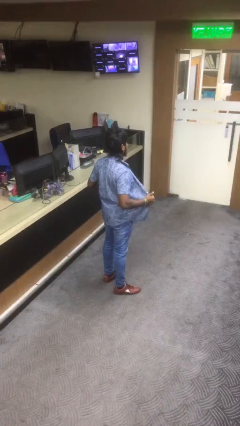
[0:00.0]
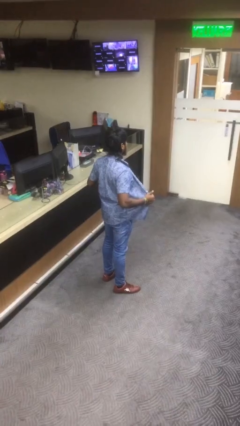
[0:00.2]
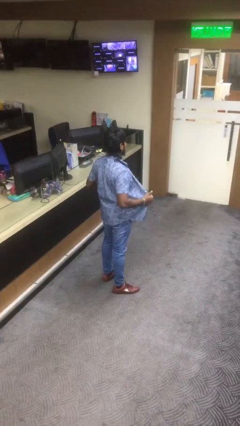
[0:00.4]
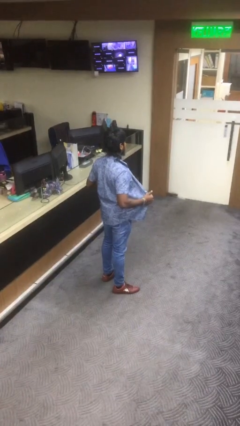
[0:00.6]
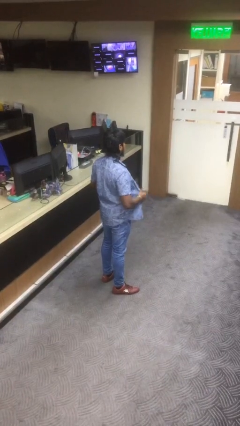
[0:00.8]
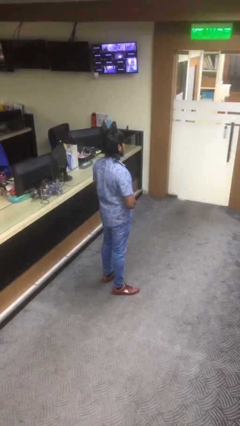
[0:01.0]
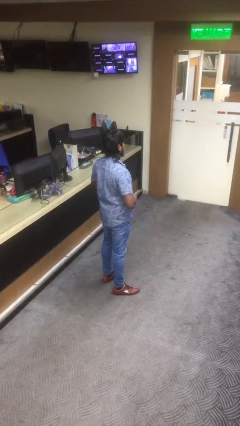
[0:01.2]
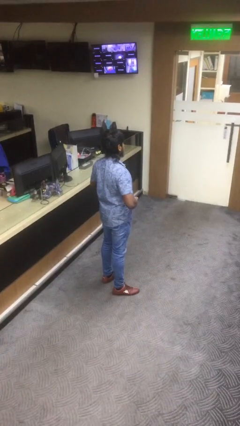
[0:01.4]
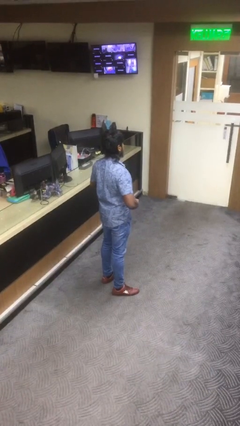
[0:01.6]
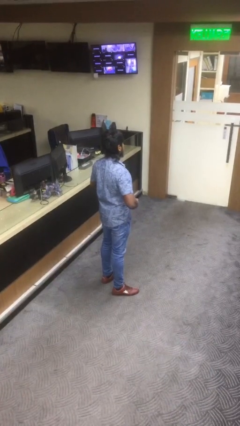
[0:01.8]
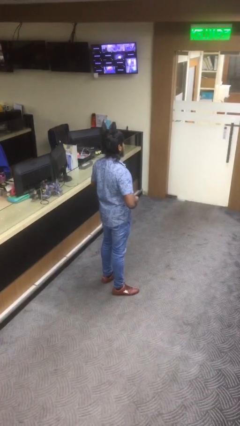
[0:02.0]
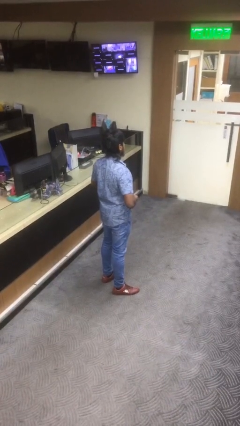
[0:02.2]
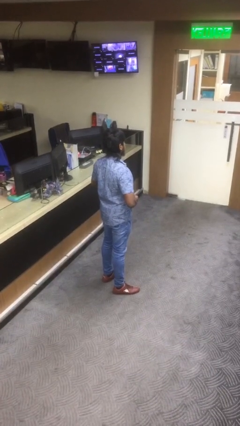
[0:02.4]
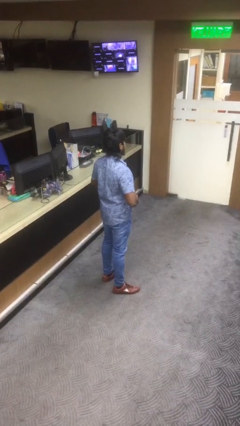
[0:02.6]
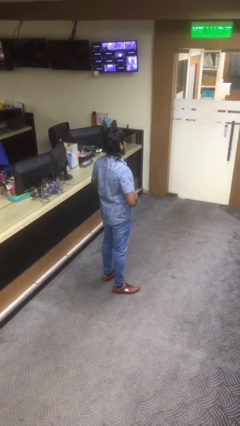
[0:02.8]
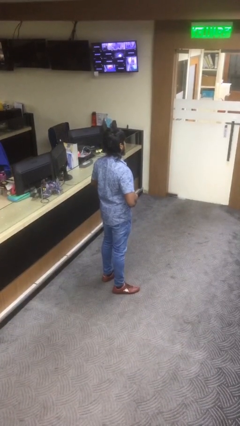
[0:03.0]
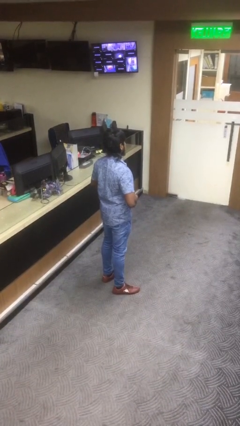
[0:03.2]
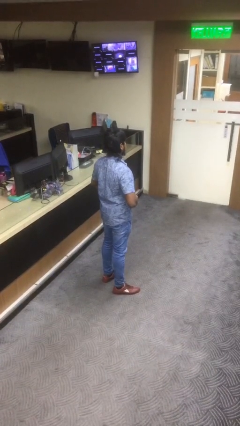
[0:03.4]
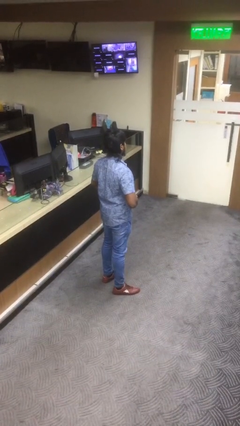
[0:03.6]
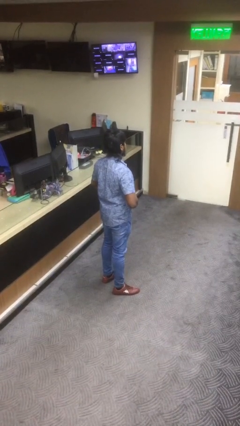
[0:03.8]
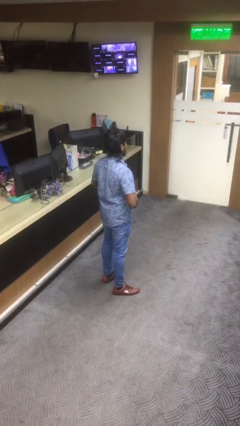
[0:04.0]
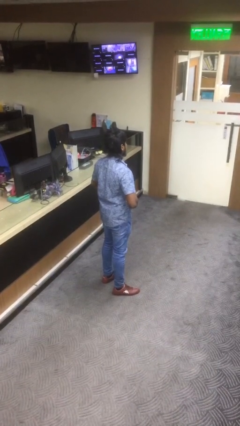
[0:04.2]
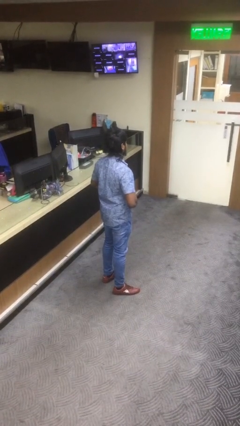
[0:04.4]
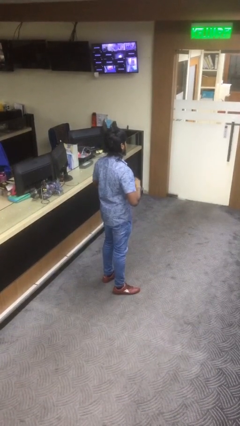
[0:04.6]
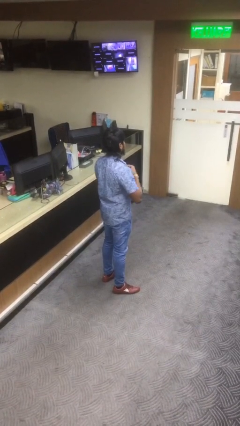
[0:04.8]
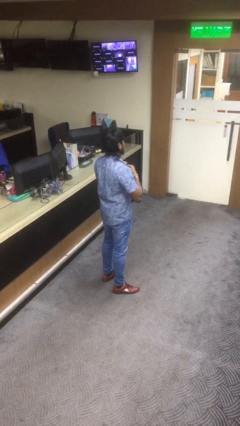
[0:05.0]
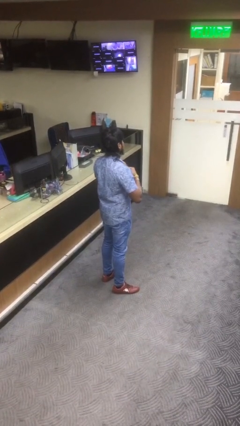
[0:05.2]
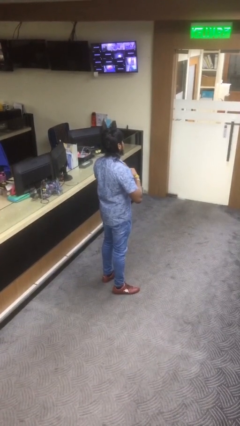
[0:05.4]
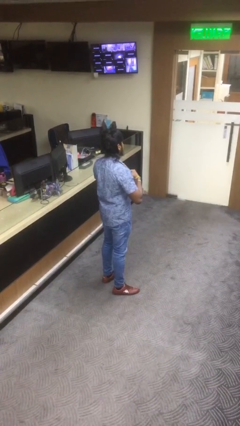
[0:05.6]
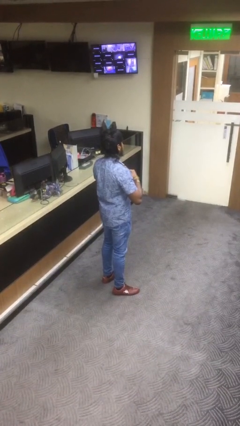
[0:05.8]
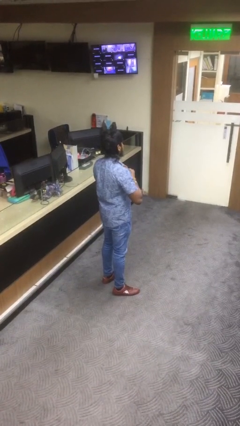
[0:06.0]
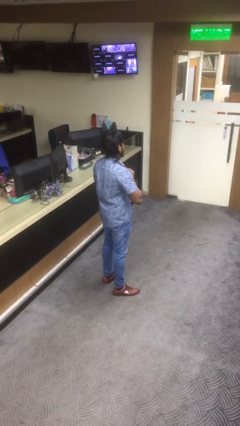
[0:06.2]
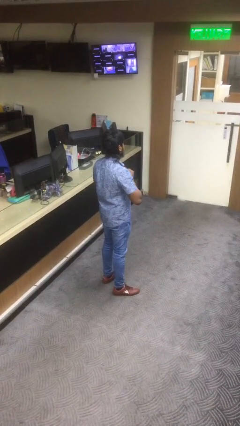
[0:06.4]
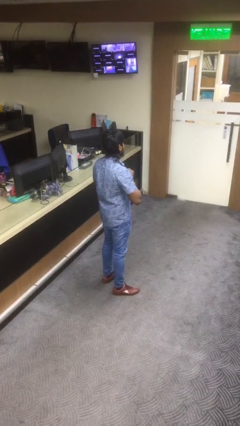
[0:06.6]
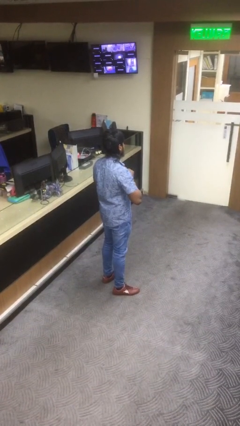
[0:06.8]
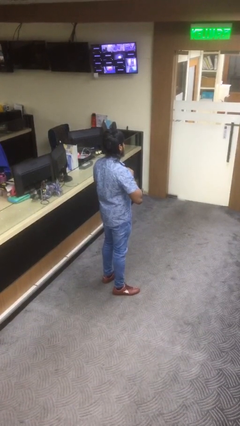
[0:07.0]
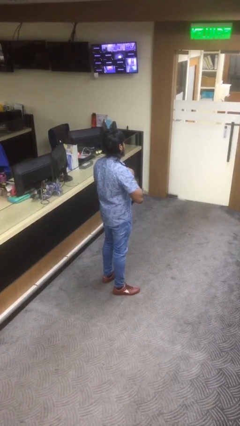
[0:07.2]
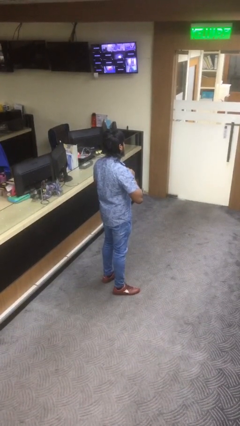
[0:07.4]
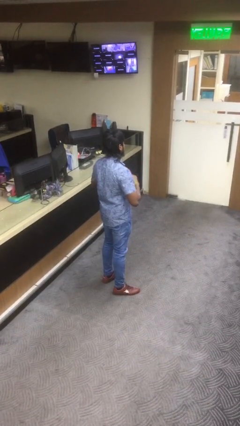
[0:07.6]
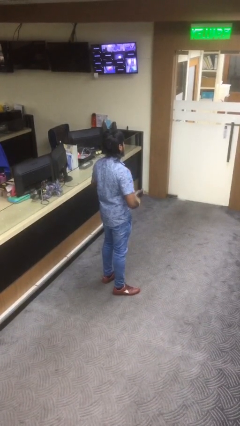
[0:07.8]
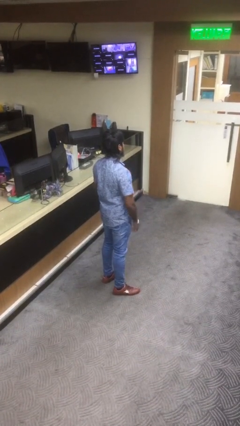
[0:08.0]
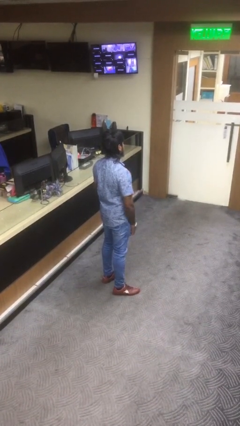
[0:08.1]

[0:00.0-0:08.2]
person buttons shirt

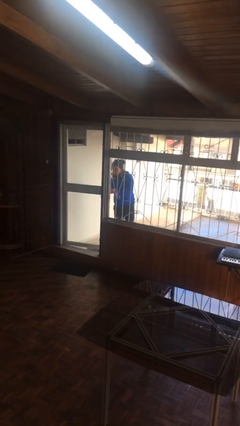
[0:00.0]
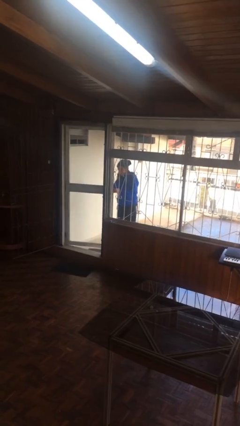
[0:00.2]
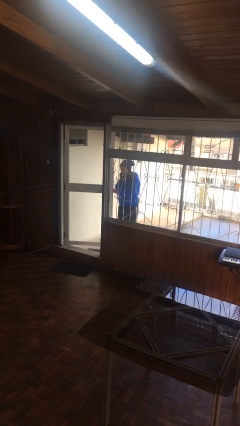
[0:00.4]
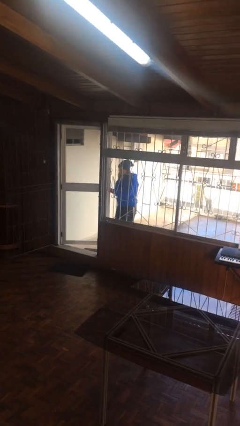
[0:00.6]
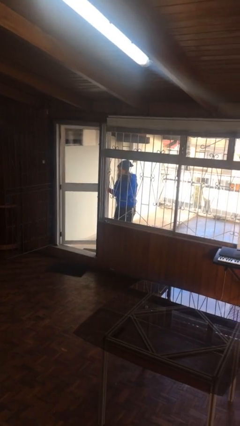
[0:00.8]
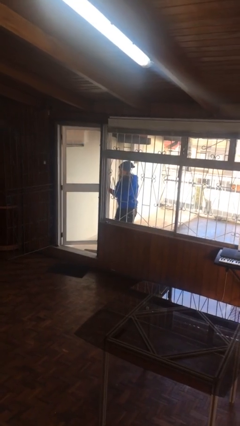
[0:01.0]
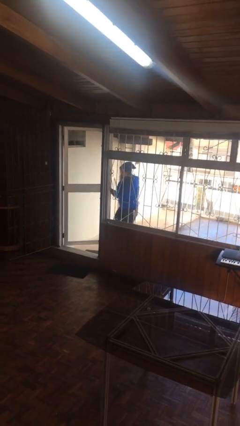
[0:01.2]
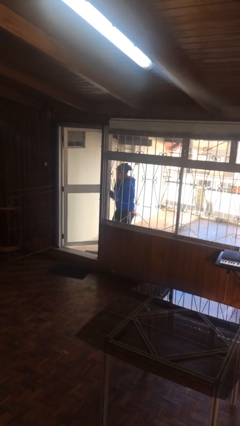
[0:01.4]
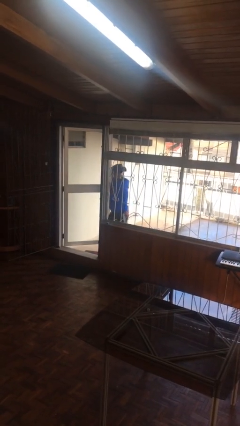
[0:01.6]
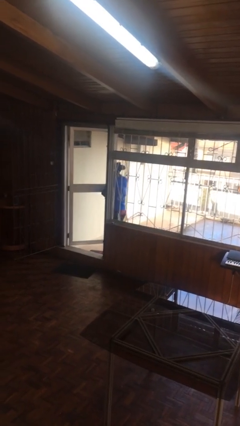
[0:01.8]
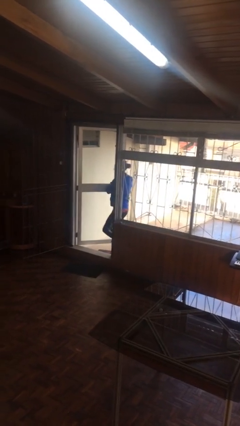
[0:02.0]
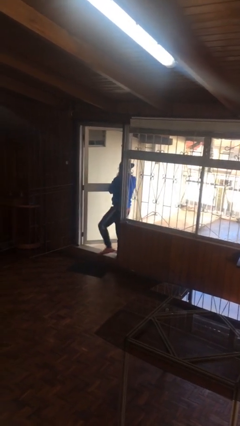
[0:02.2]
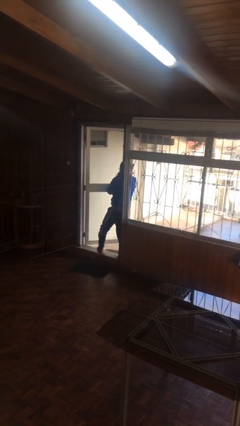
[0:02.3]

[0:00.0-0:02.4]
person opens facility door

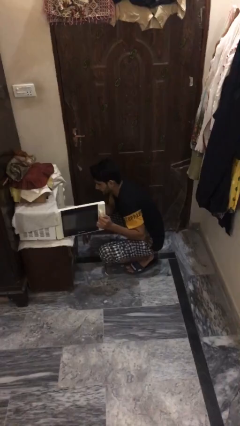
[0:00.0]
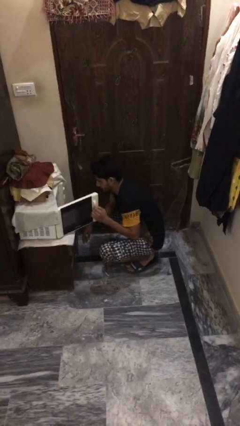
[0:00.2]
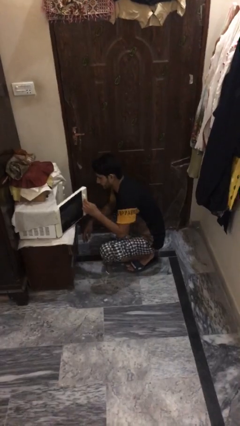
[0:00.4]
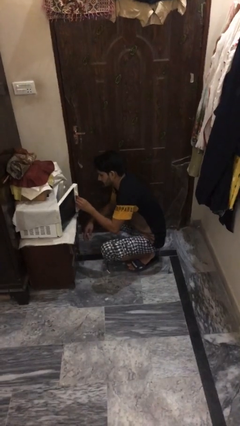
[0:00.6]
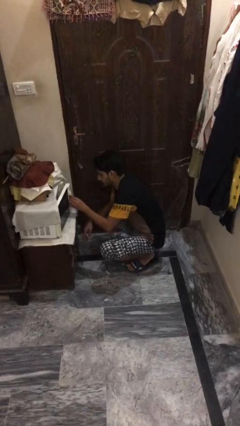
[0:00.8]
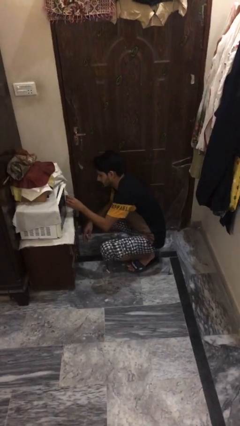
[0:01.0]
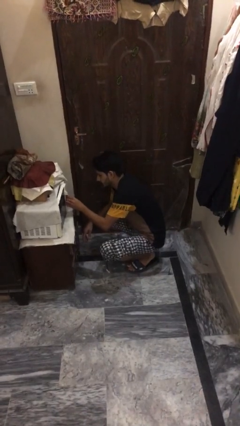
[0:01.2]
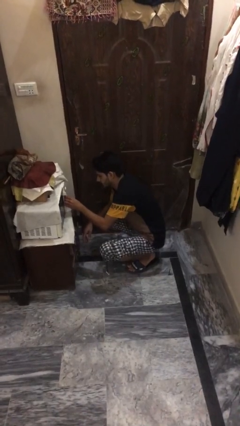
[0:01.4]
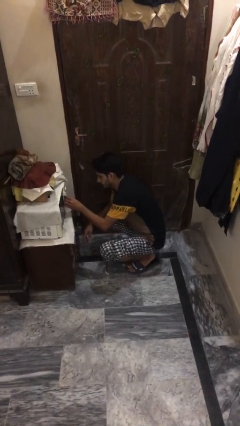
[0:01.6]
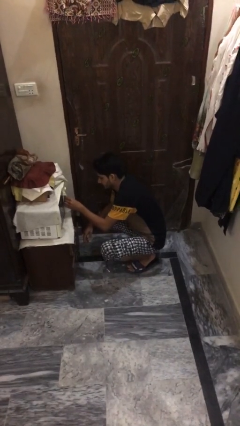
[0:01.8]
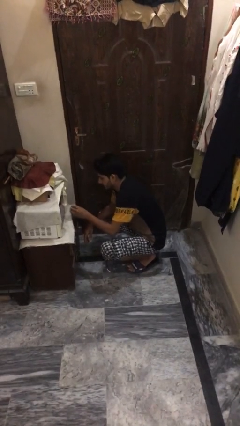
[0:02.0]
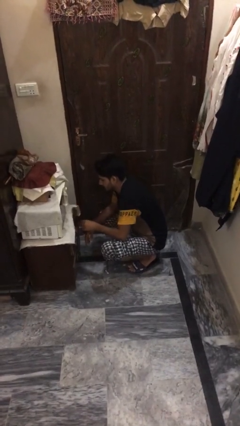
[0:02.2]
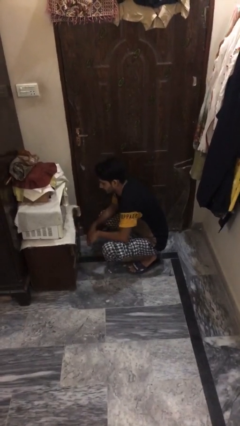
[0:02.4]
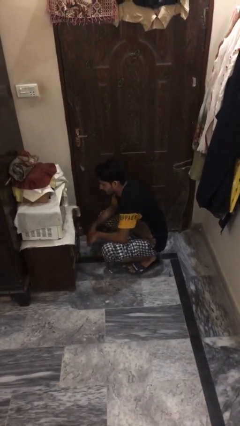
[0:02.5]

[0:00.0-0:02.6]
person closes microwave

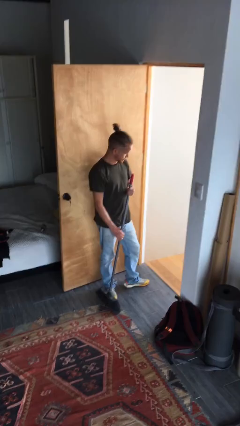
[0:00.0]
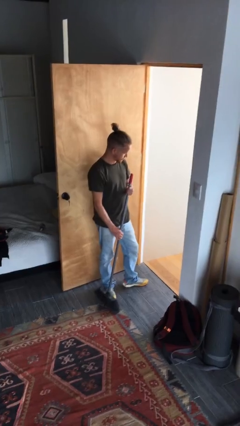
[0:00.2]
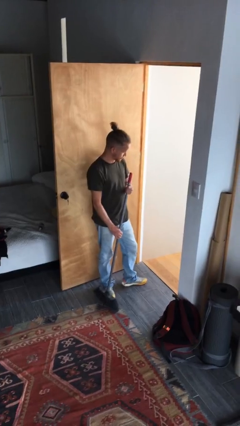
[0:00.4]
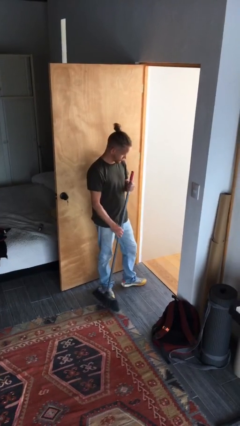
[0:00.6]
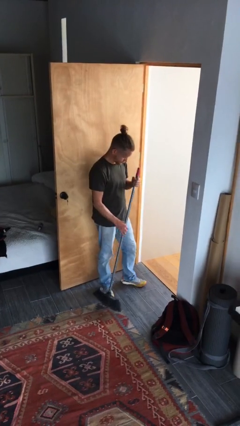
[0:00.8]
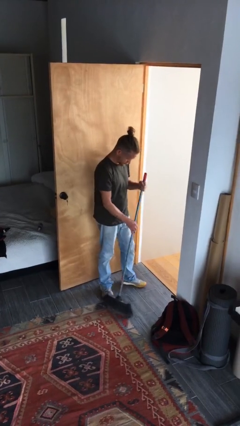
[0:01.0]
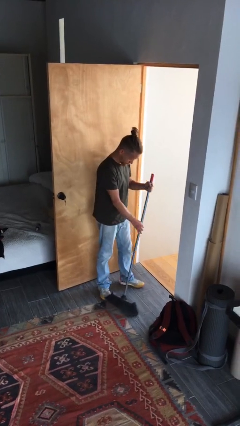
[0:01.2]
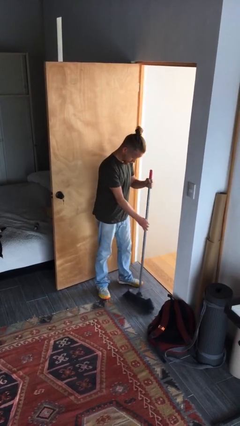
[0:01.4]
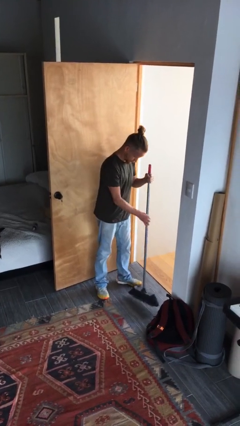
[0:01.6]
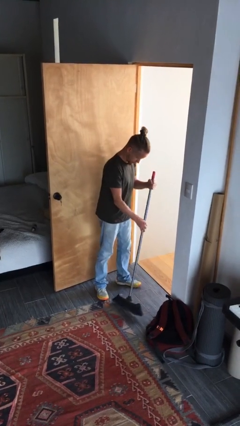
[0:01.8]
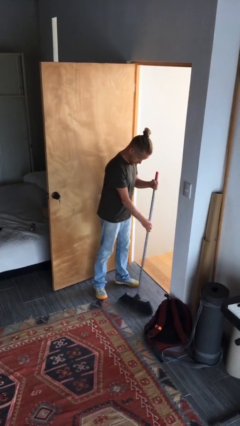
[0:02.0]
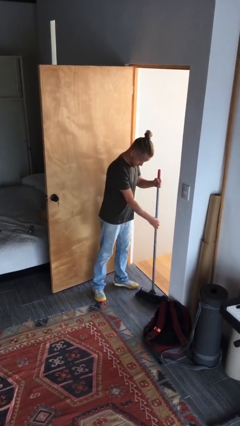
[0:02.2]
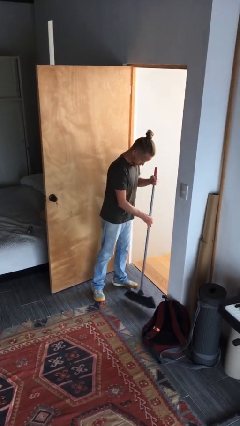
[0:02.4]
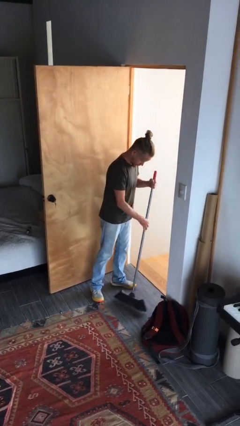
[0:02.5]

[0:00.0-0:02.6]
person sweeps floor

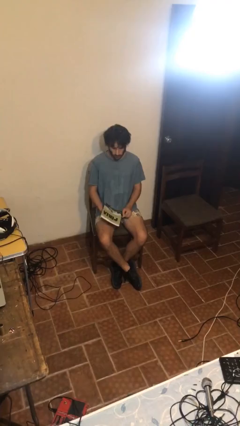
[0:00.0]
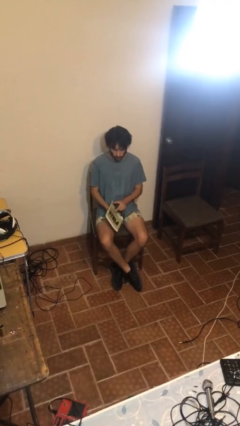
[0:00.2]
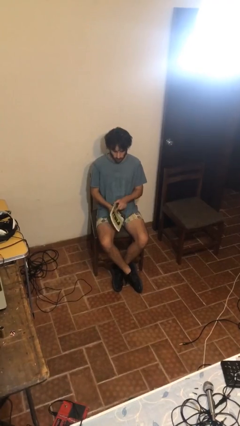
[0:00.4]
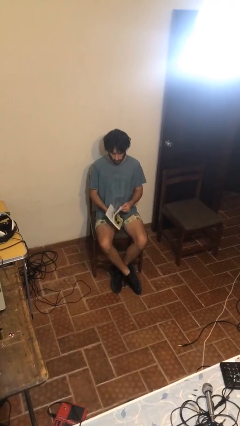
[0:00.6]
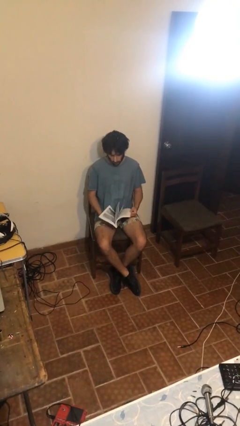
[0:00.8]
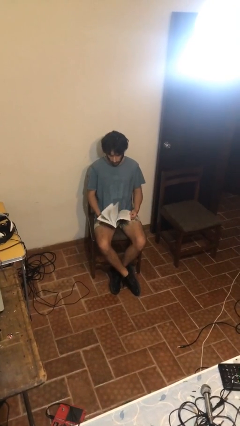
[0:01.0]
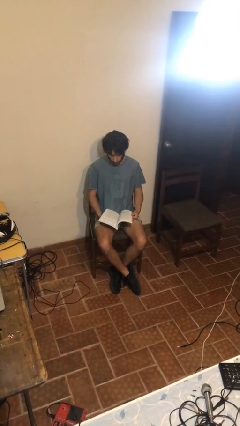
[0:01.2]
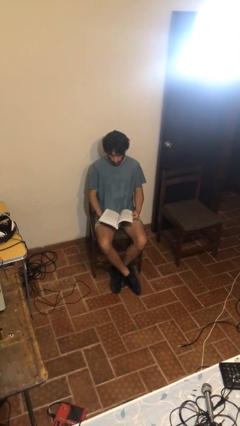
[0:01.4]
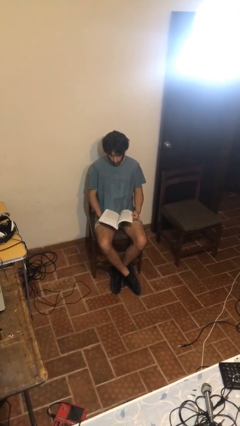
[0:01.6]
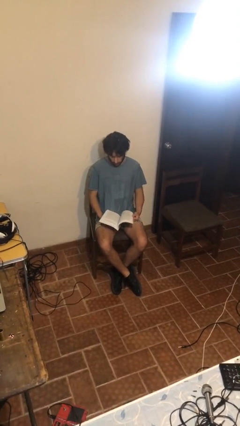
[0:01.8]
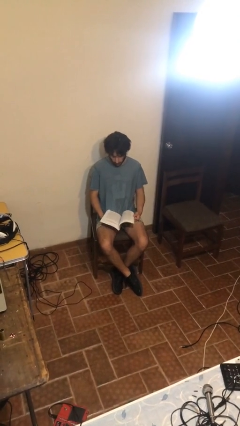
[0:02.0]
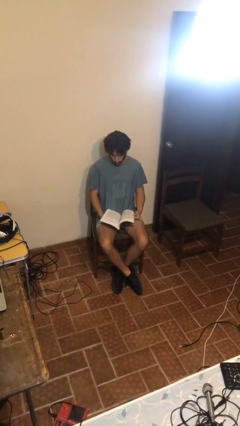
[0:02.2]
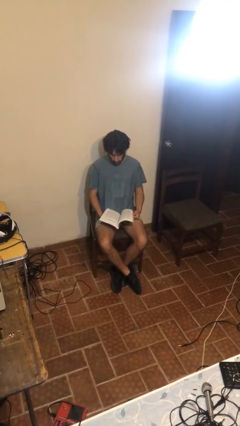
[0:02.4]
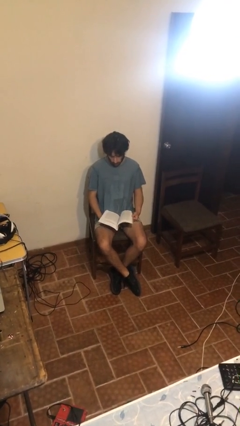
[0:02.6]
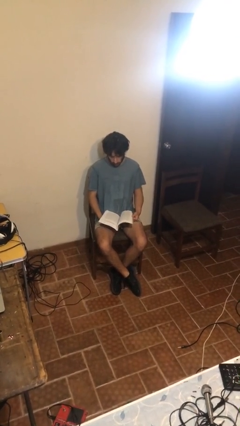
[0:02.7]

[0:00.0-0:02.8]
person reads document
